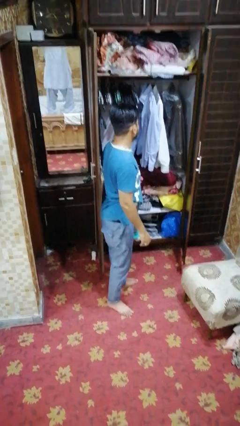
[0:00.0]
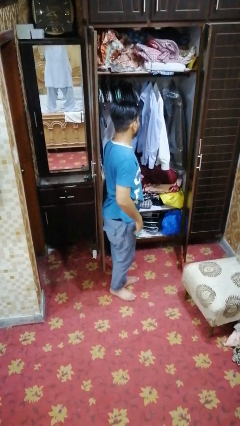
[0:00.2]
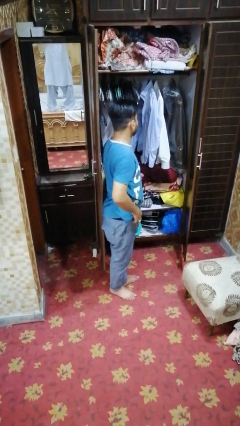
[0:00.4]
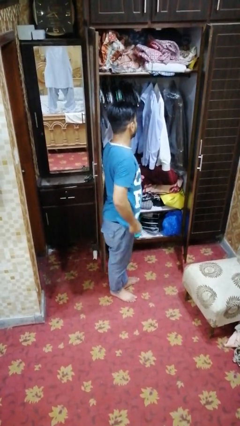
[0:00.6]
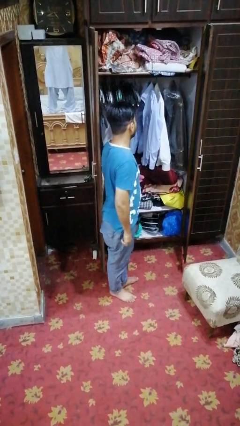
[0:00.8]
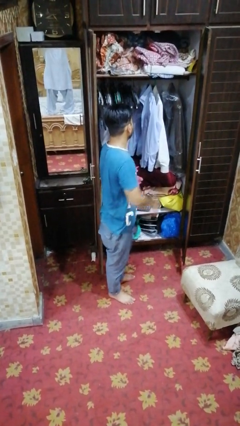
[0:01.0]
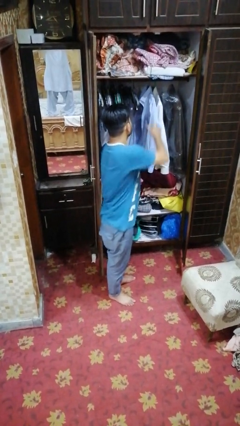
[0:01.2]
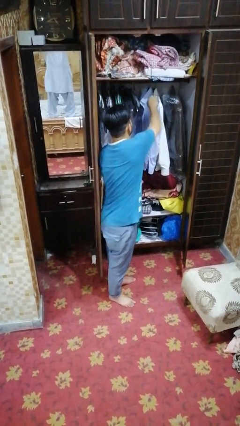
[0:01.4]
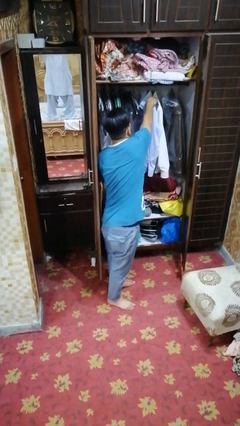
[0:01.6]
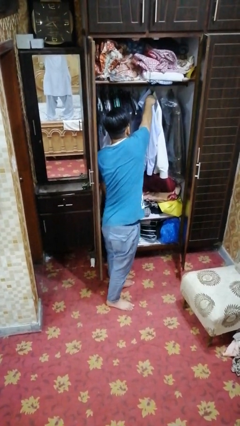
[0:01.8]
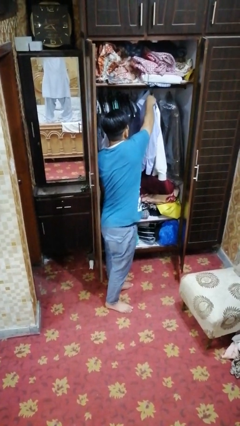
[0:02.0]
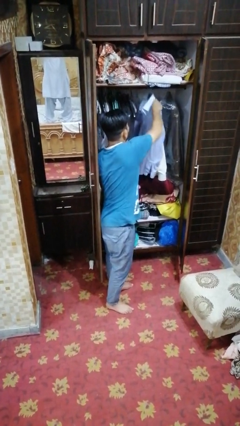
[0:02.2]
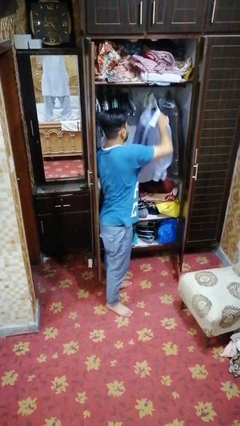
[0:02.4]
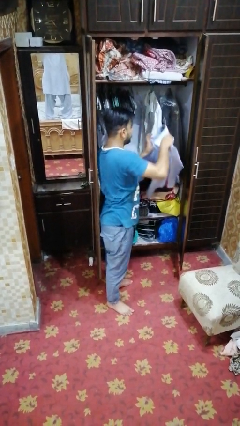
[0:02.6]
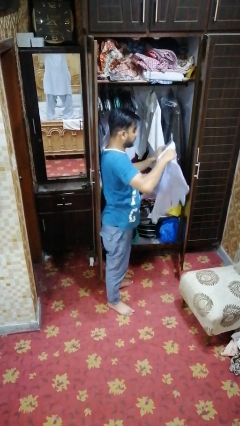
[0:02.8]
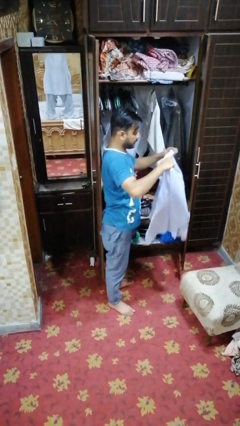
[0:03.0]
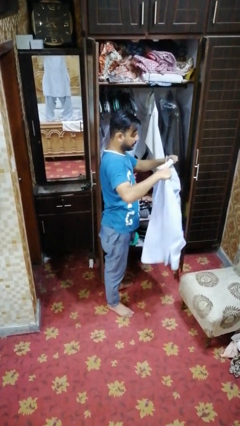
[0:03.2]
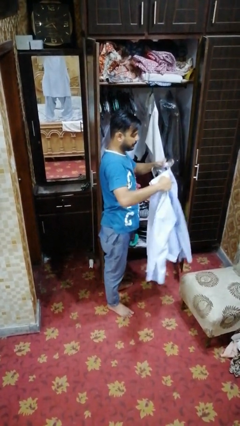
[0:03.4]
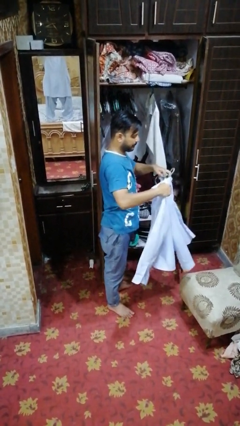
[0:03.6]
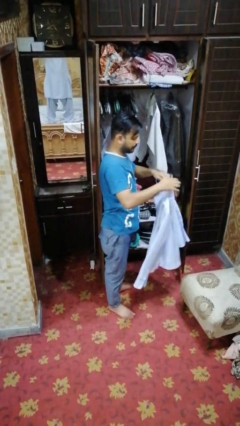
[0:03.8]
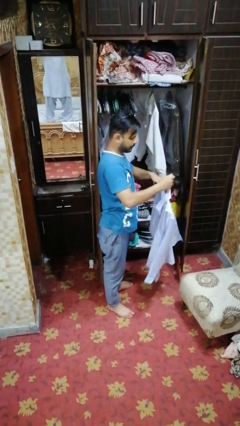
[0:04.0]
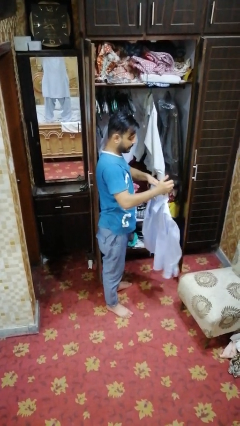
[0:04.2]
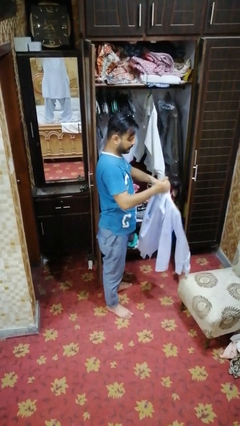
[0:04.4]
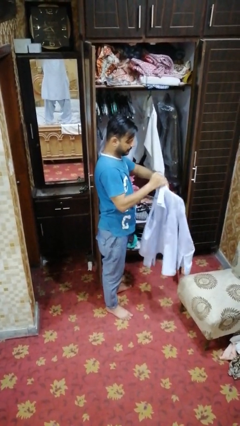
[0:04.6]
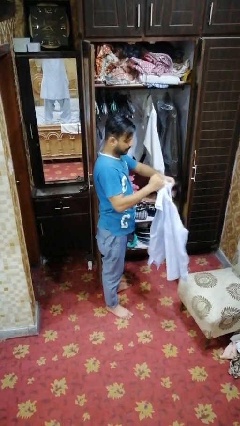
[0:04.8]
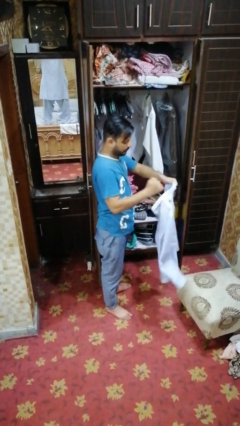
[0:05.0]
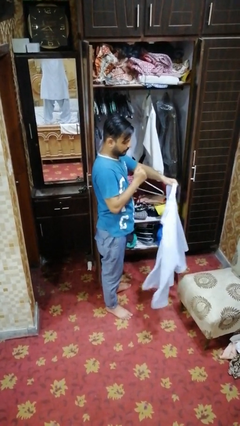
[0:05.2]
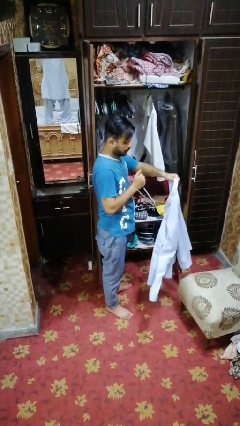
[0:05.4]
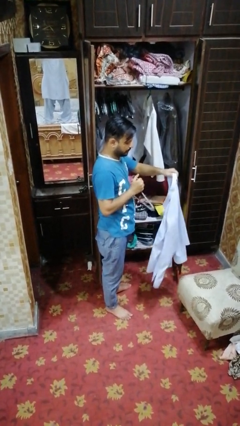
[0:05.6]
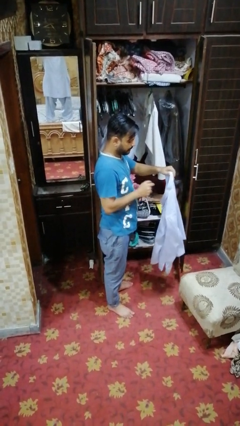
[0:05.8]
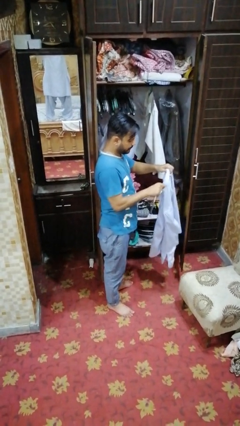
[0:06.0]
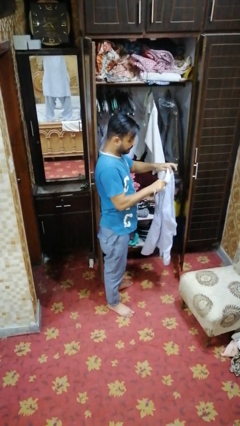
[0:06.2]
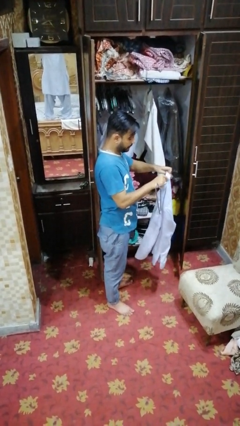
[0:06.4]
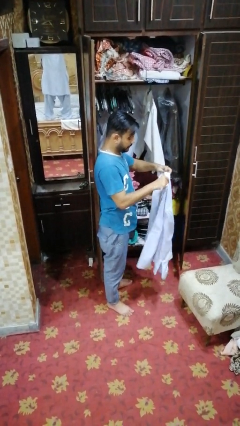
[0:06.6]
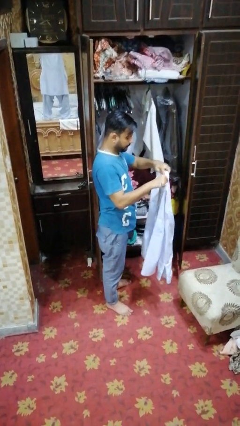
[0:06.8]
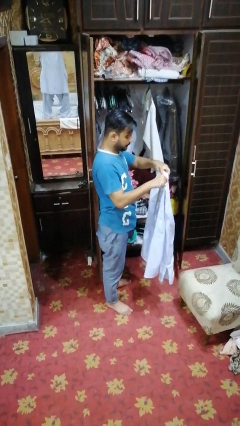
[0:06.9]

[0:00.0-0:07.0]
person takes clothes from closet

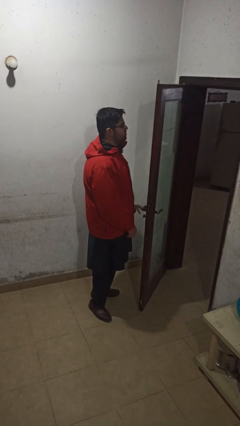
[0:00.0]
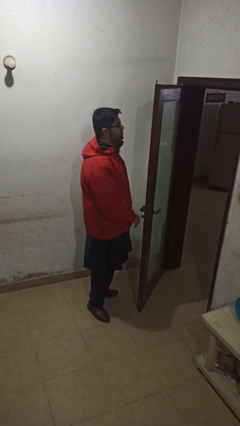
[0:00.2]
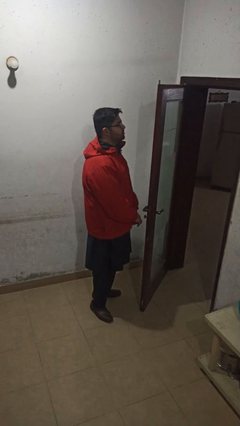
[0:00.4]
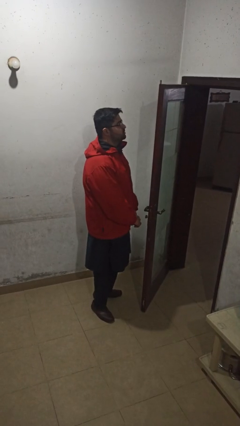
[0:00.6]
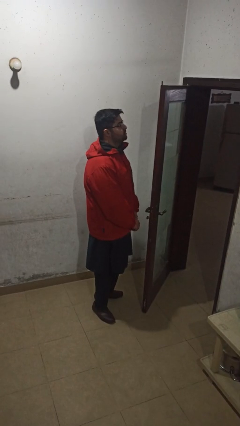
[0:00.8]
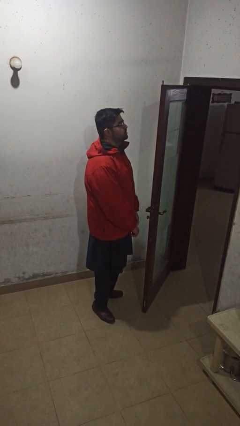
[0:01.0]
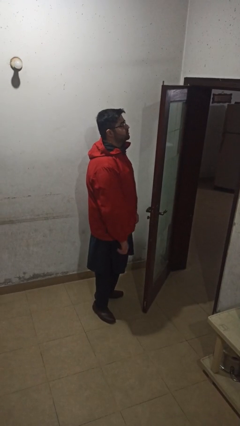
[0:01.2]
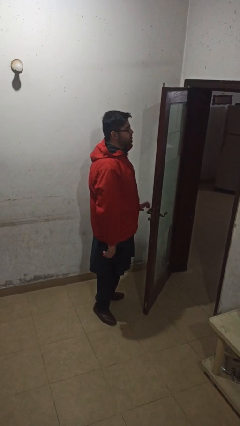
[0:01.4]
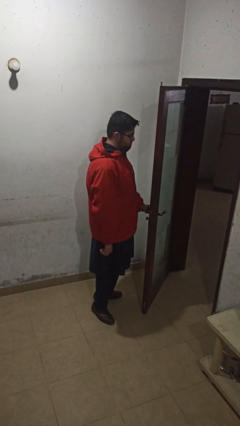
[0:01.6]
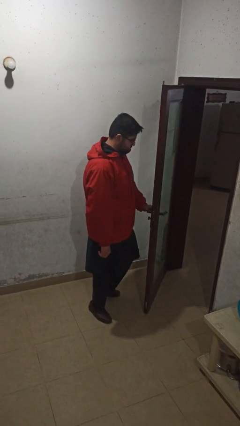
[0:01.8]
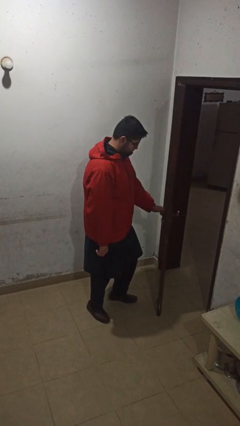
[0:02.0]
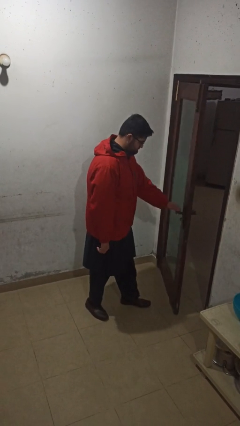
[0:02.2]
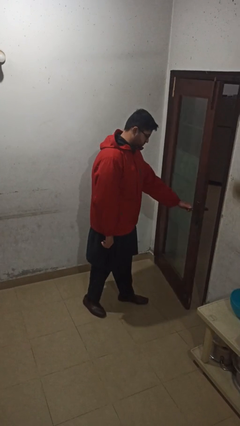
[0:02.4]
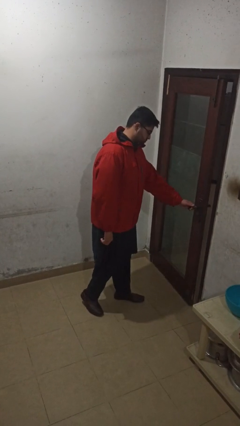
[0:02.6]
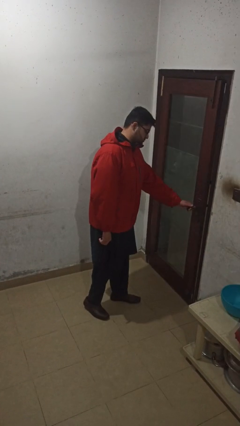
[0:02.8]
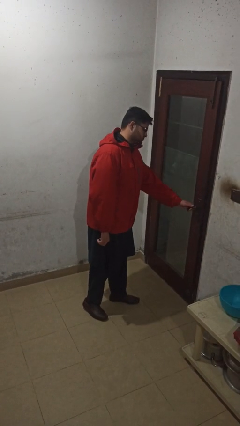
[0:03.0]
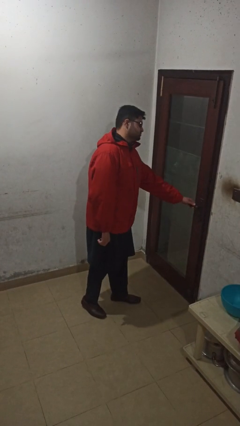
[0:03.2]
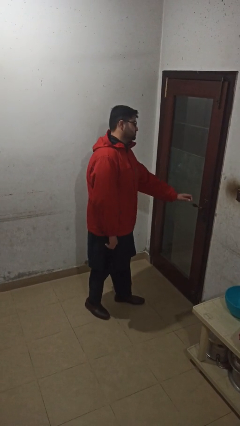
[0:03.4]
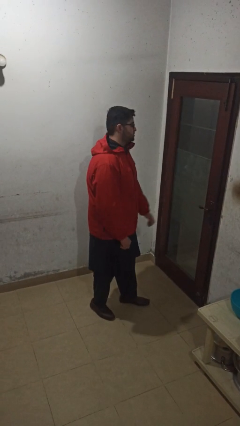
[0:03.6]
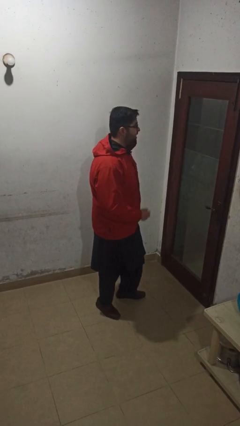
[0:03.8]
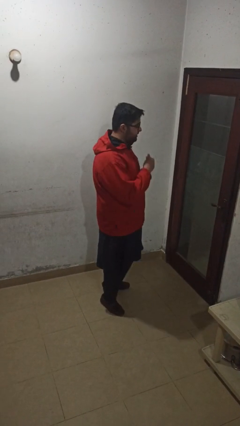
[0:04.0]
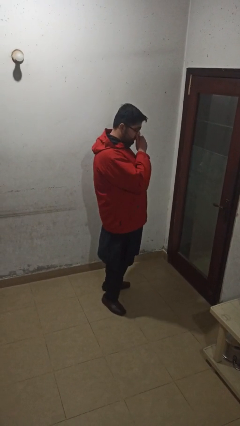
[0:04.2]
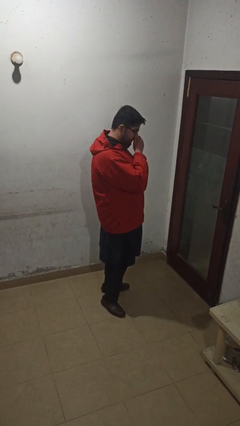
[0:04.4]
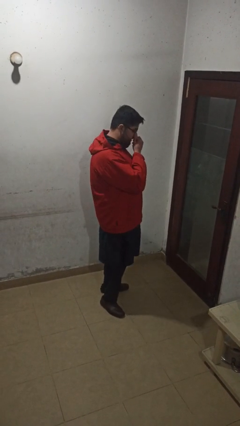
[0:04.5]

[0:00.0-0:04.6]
person closes facility door

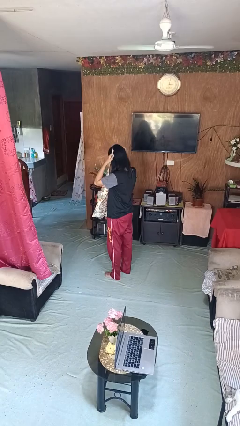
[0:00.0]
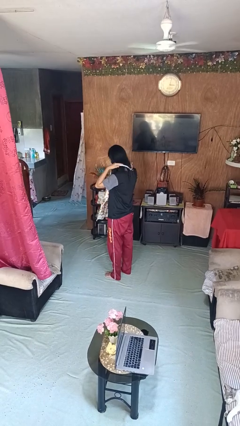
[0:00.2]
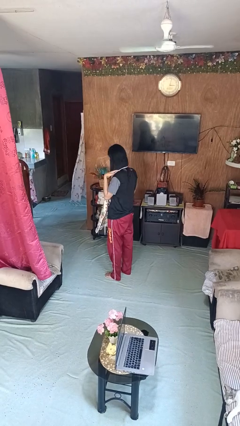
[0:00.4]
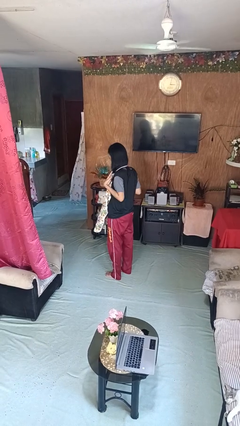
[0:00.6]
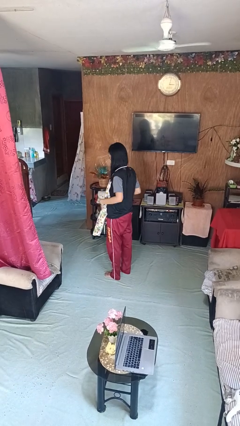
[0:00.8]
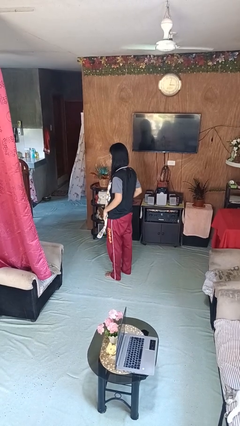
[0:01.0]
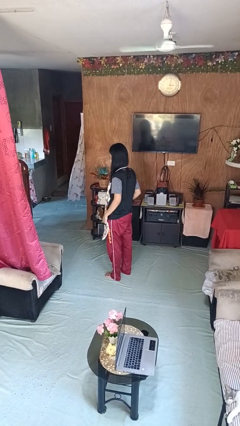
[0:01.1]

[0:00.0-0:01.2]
person puts on apron

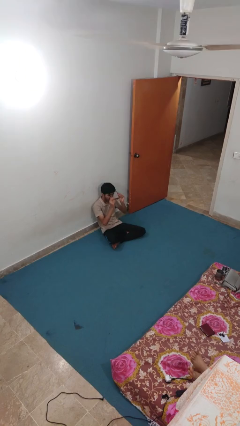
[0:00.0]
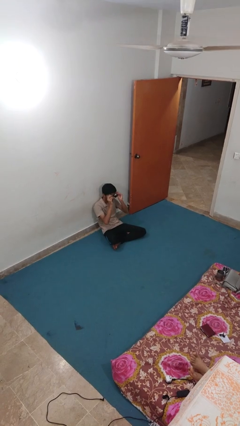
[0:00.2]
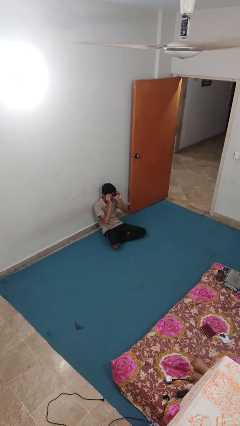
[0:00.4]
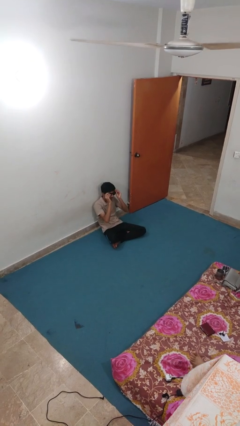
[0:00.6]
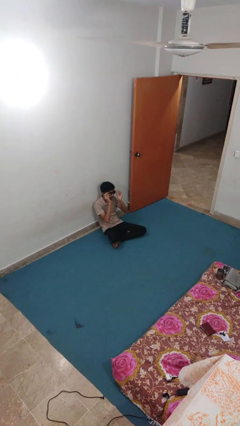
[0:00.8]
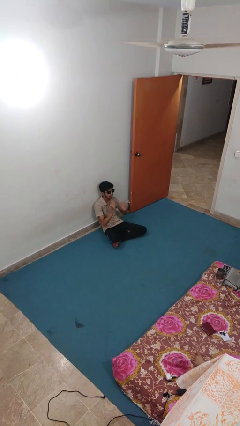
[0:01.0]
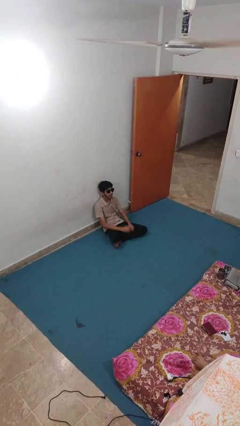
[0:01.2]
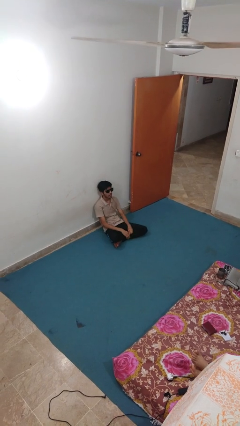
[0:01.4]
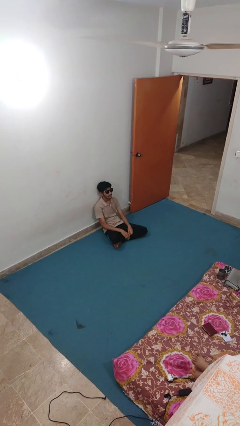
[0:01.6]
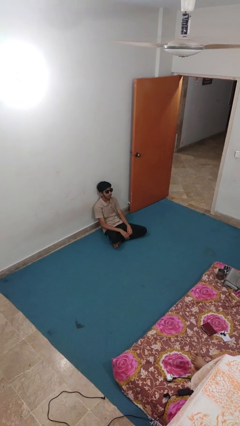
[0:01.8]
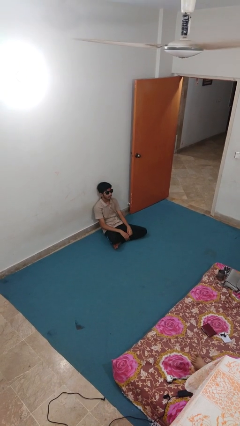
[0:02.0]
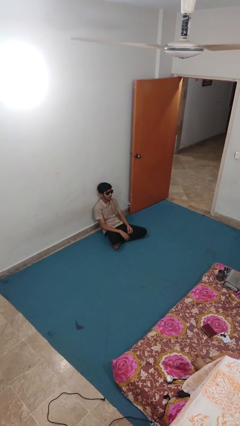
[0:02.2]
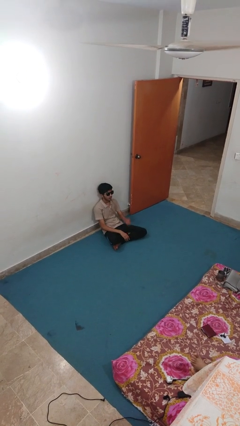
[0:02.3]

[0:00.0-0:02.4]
person puts on sunglasses

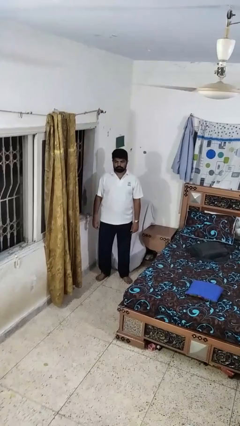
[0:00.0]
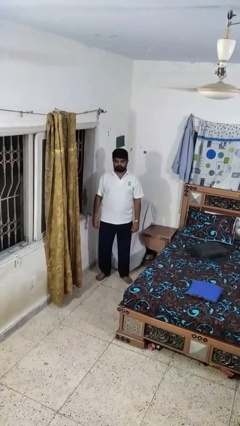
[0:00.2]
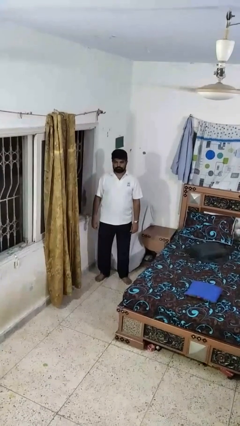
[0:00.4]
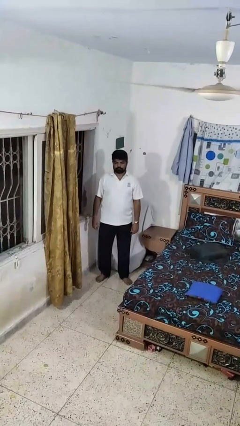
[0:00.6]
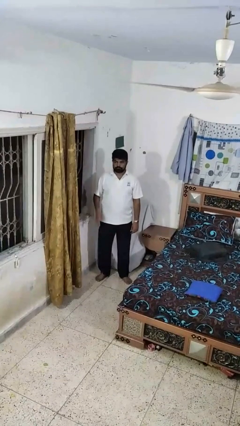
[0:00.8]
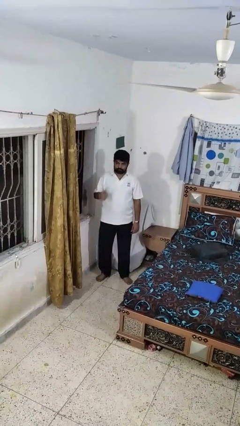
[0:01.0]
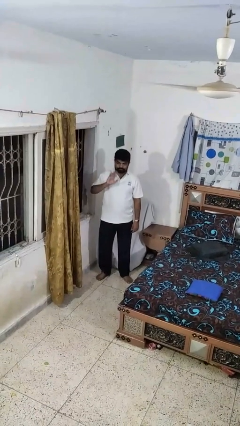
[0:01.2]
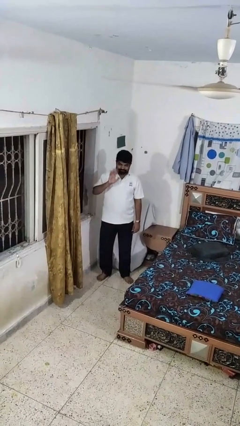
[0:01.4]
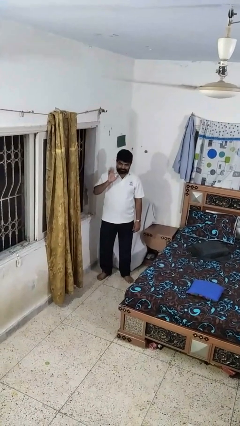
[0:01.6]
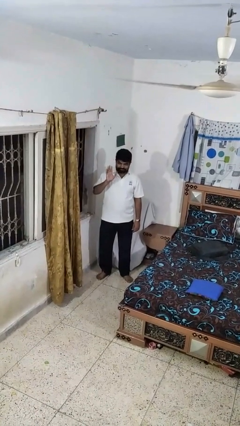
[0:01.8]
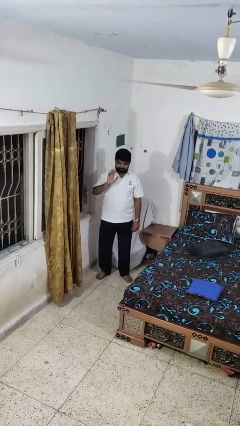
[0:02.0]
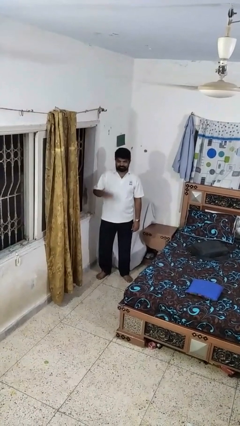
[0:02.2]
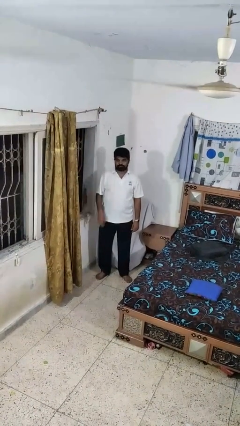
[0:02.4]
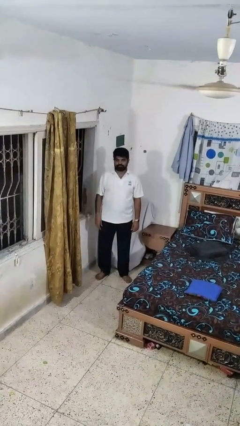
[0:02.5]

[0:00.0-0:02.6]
person waves at person
